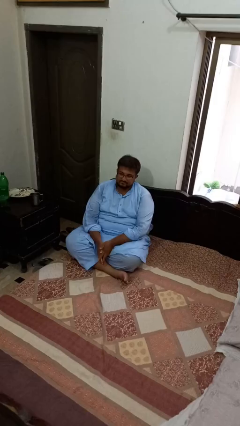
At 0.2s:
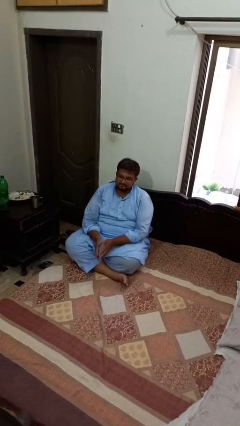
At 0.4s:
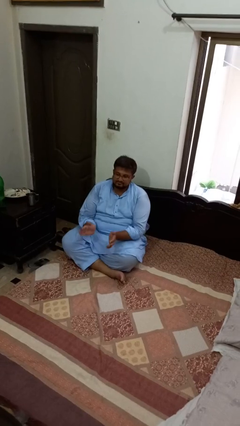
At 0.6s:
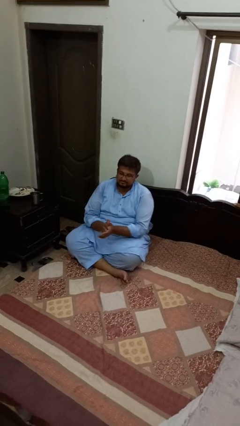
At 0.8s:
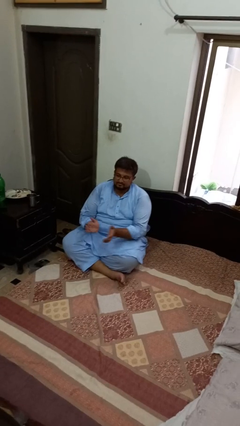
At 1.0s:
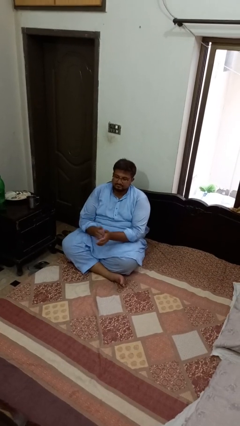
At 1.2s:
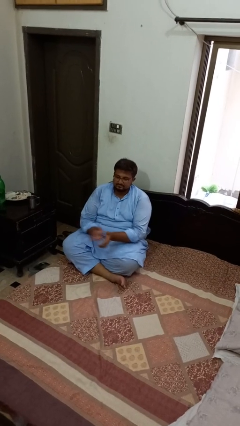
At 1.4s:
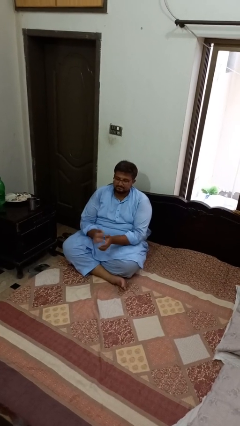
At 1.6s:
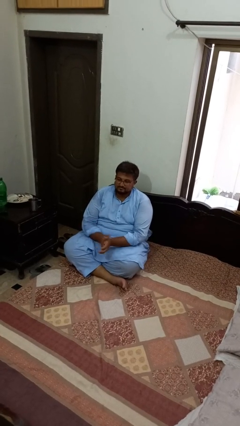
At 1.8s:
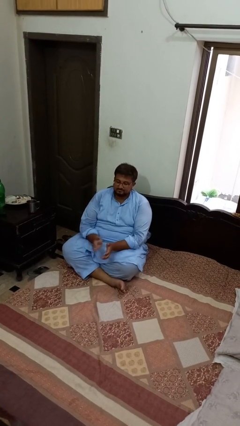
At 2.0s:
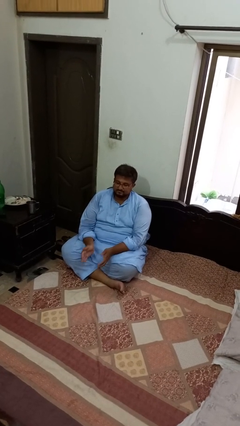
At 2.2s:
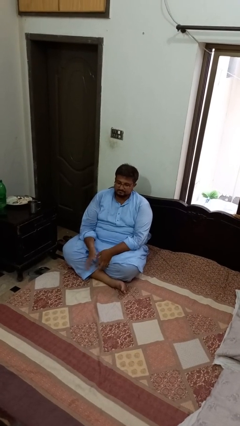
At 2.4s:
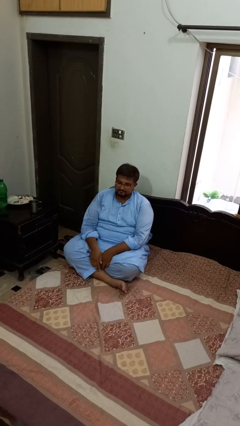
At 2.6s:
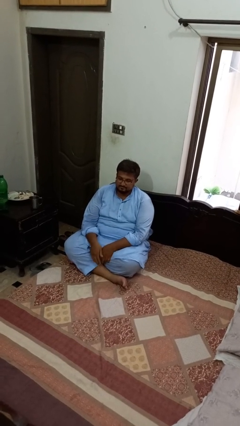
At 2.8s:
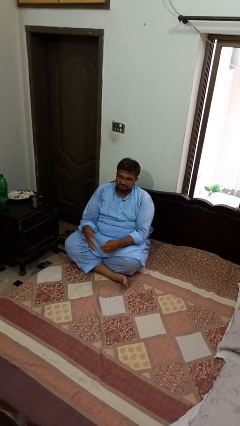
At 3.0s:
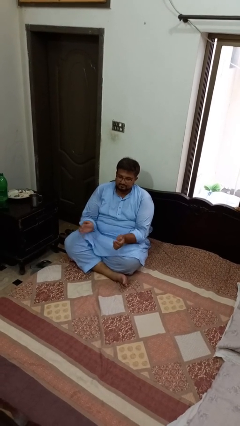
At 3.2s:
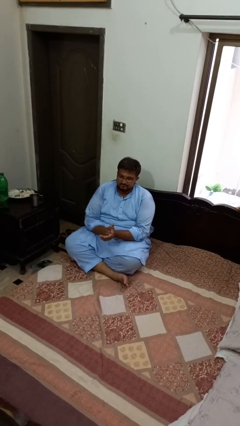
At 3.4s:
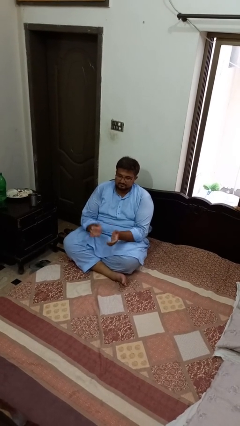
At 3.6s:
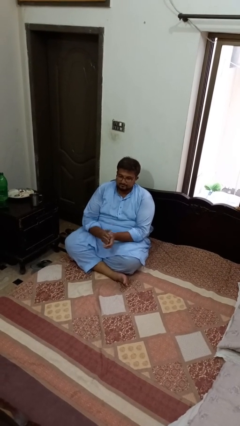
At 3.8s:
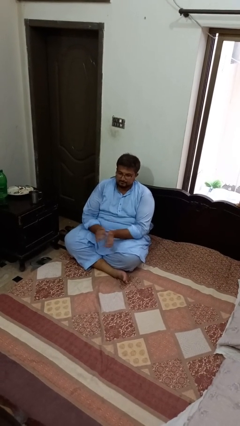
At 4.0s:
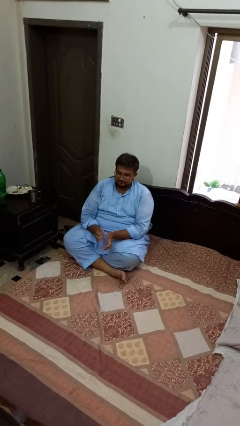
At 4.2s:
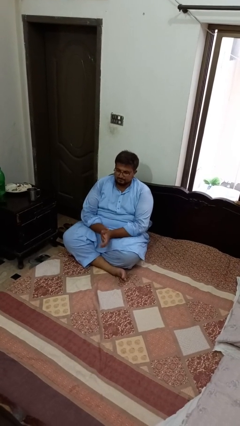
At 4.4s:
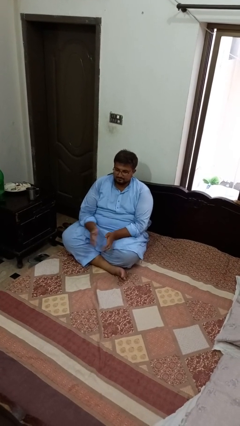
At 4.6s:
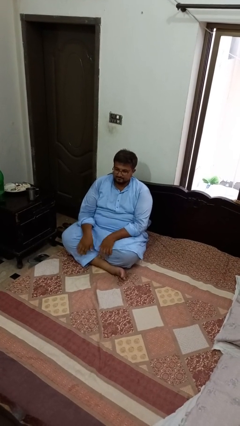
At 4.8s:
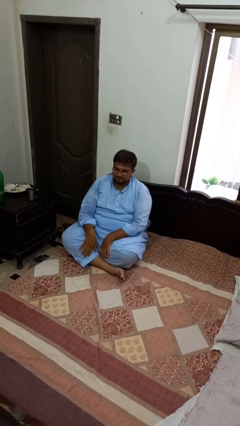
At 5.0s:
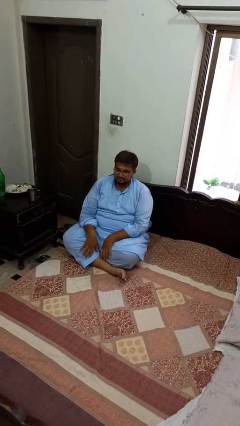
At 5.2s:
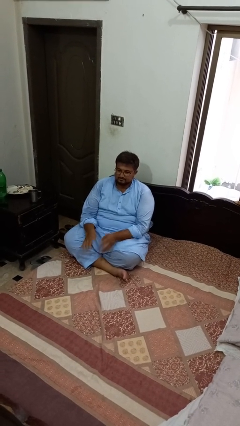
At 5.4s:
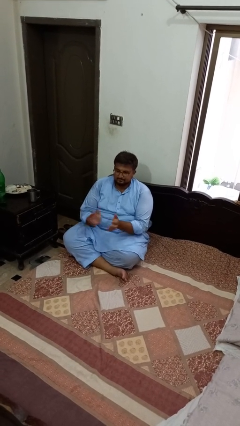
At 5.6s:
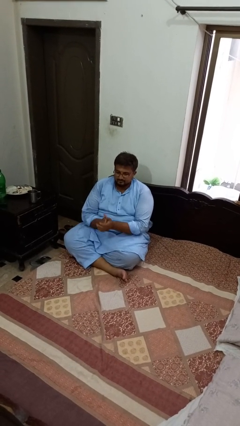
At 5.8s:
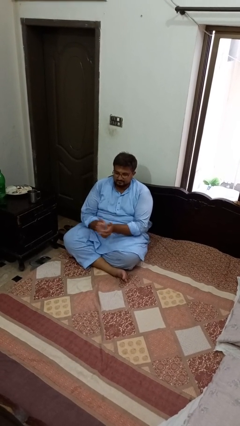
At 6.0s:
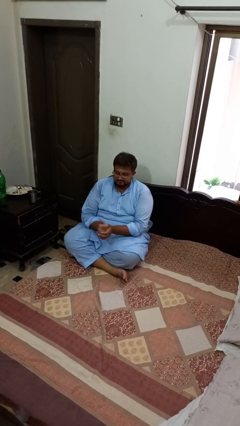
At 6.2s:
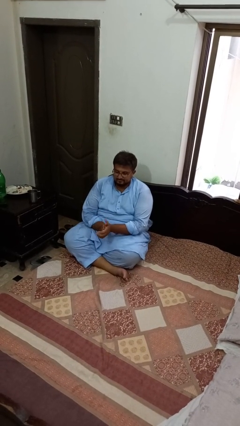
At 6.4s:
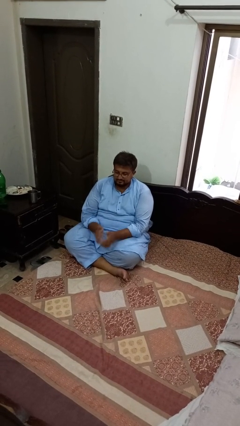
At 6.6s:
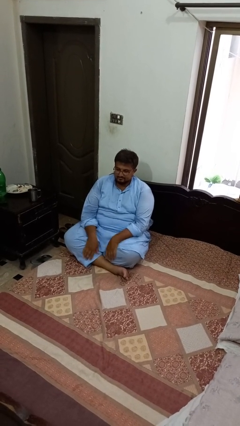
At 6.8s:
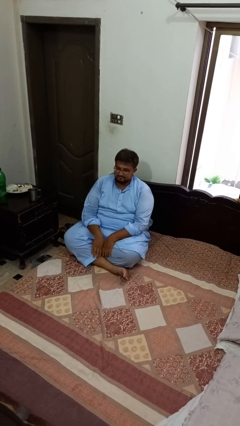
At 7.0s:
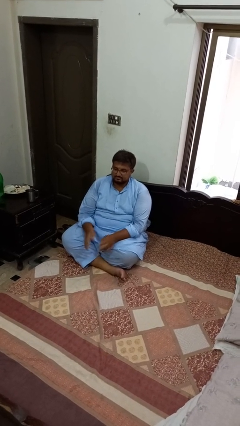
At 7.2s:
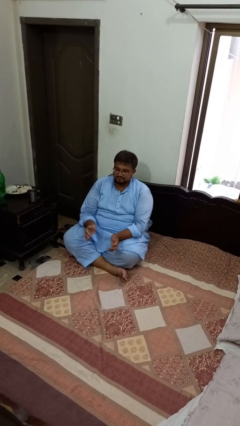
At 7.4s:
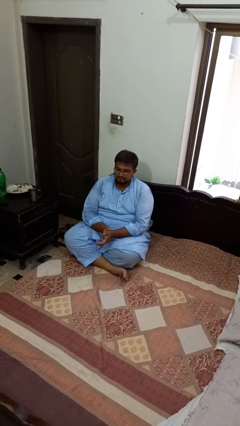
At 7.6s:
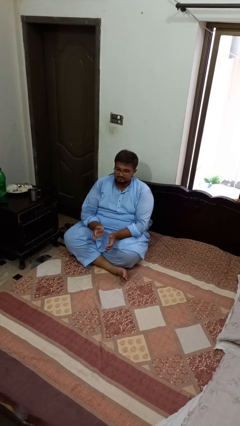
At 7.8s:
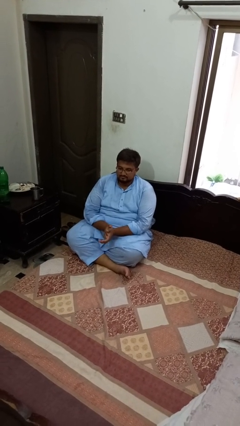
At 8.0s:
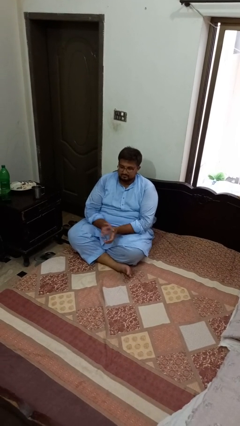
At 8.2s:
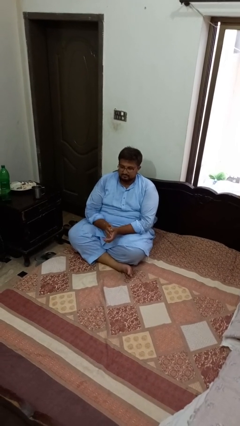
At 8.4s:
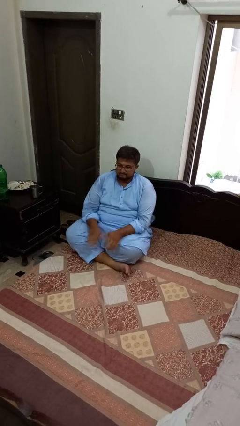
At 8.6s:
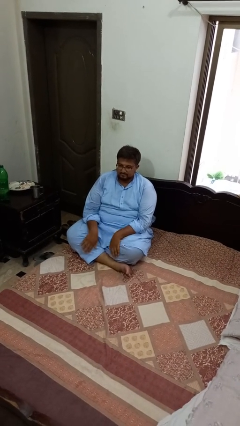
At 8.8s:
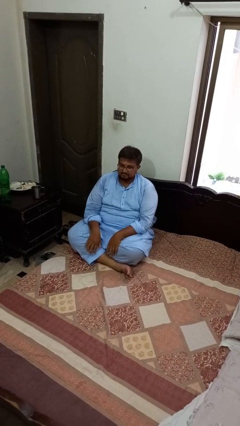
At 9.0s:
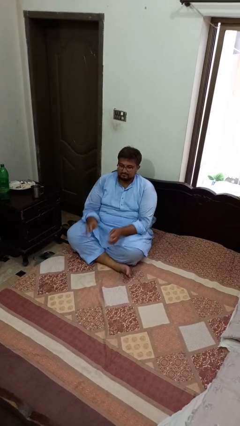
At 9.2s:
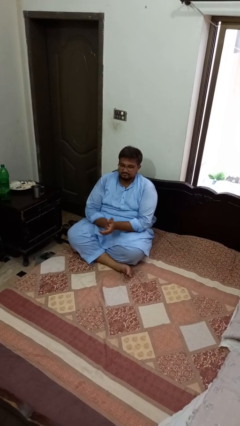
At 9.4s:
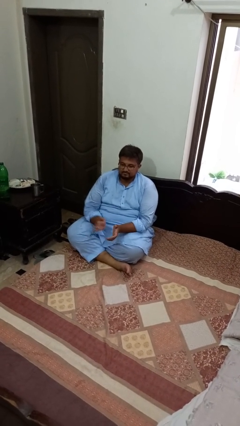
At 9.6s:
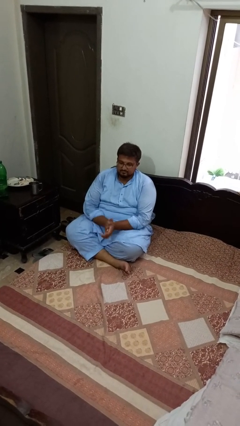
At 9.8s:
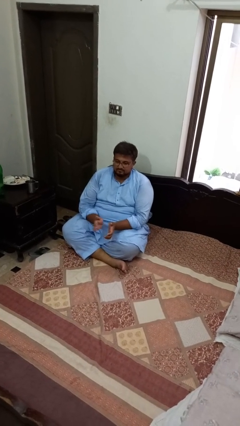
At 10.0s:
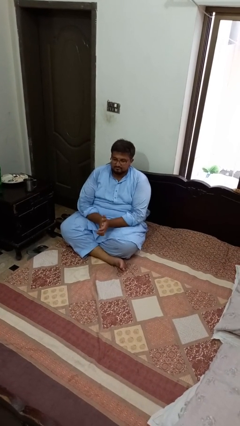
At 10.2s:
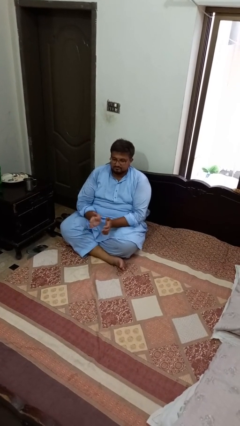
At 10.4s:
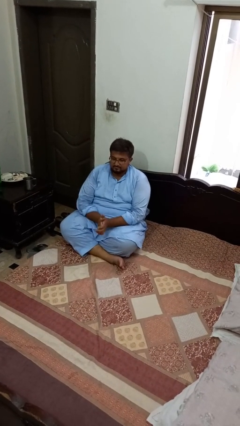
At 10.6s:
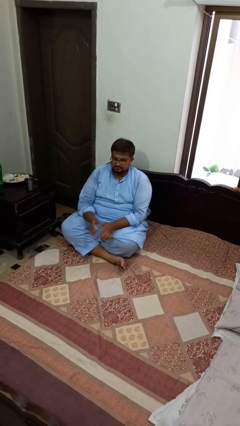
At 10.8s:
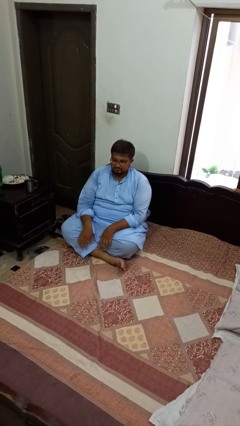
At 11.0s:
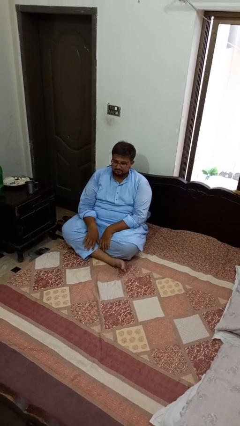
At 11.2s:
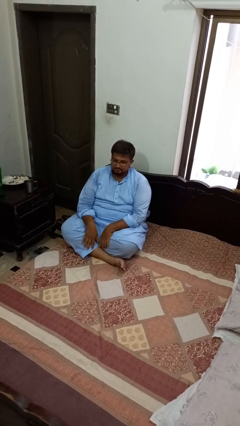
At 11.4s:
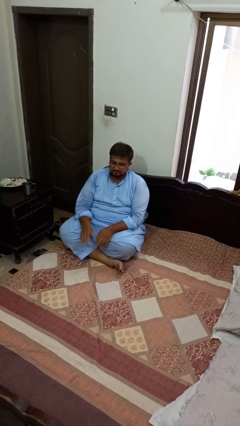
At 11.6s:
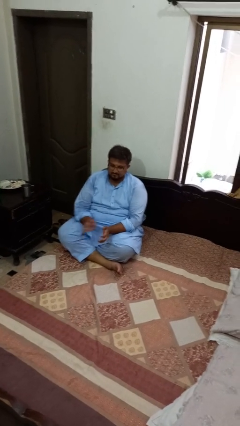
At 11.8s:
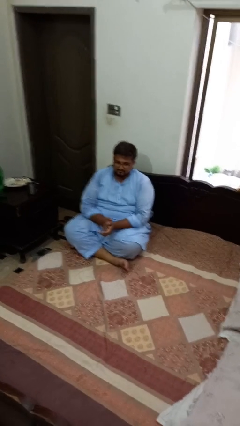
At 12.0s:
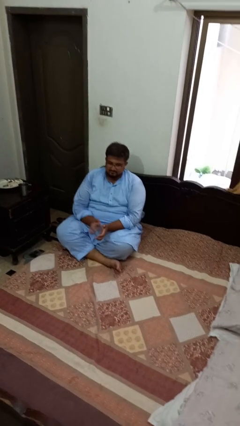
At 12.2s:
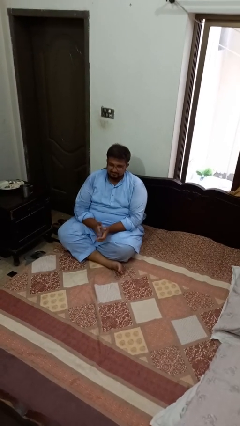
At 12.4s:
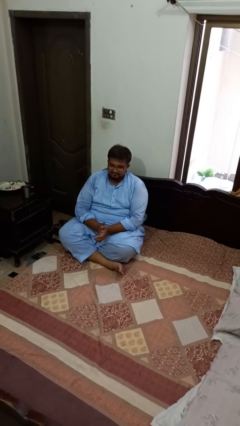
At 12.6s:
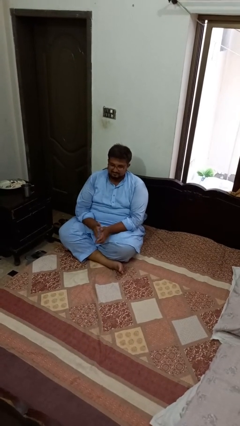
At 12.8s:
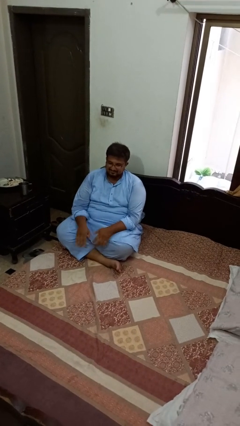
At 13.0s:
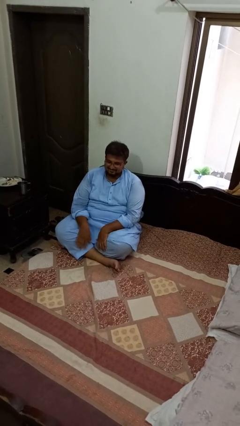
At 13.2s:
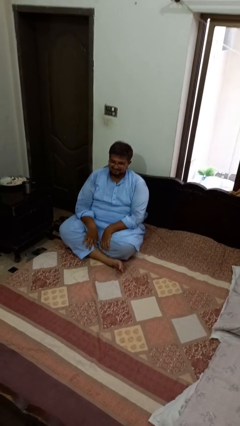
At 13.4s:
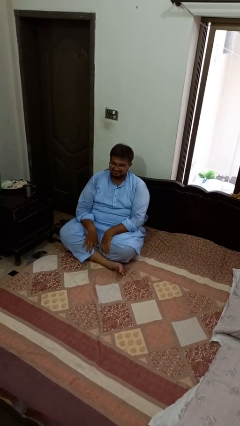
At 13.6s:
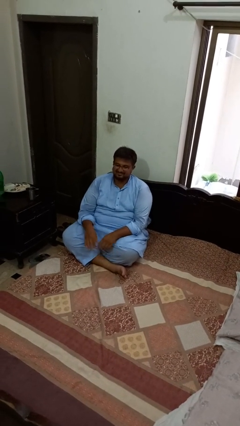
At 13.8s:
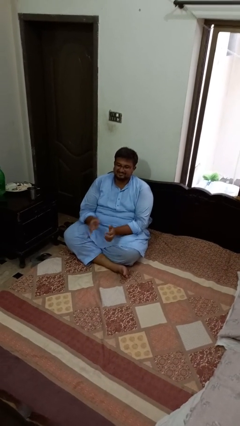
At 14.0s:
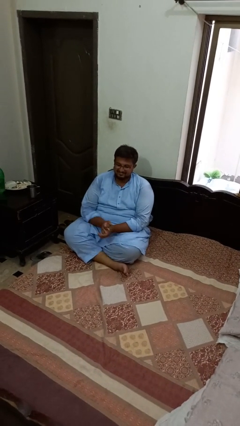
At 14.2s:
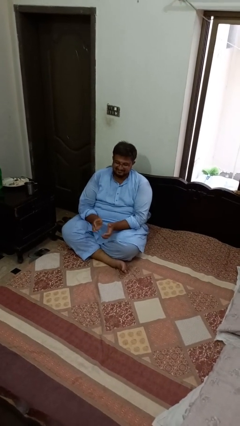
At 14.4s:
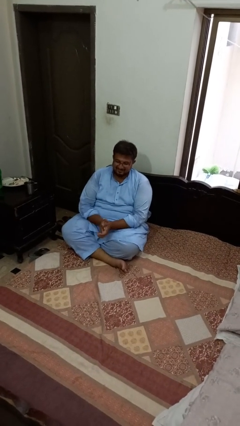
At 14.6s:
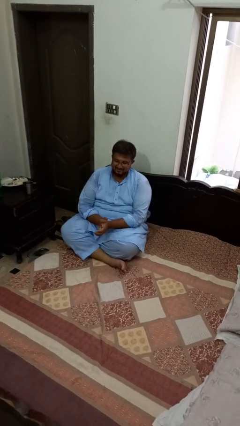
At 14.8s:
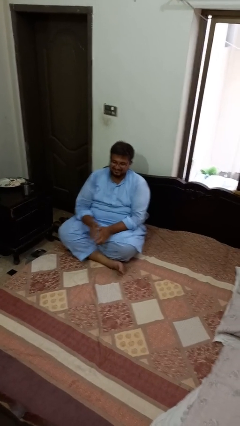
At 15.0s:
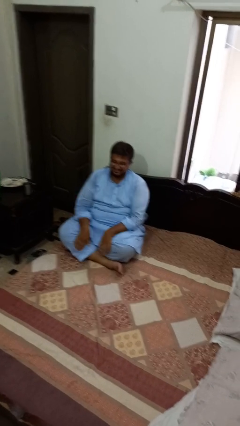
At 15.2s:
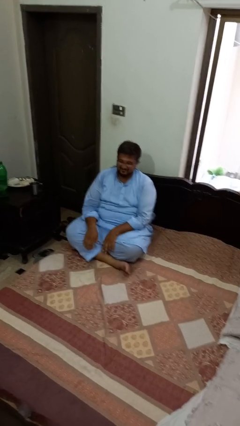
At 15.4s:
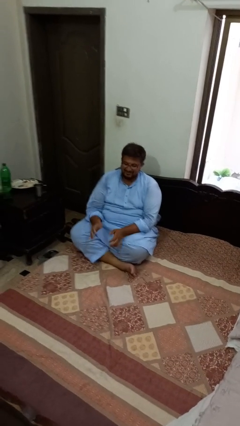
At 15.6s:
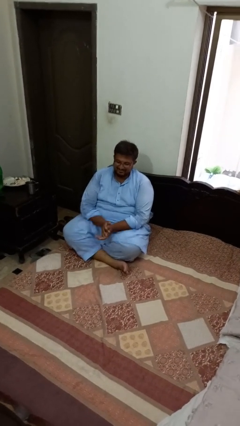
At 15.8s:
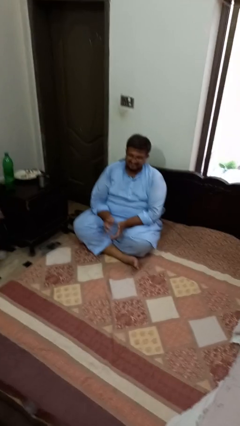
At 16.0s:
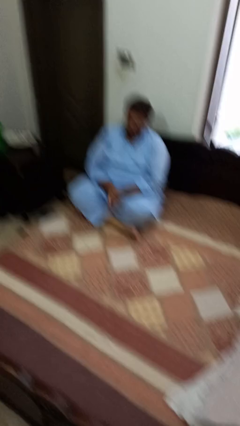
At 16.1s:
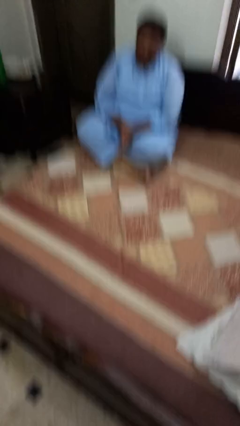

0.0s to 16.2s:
person claps hands

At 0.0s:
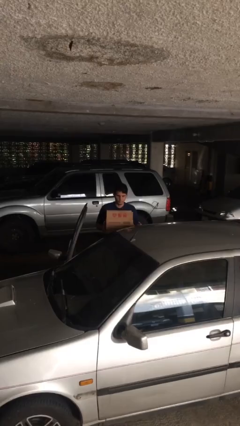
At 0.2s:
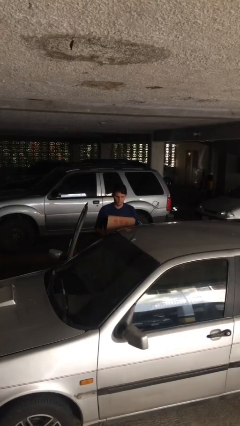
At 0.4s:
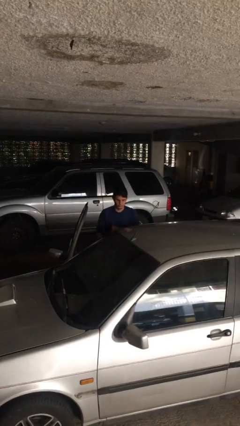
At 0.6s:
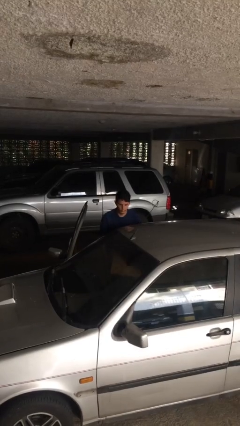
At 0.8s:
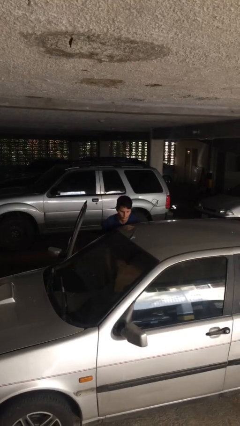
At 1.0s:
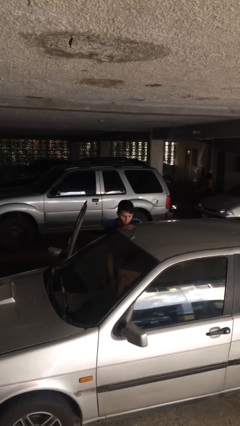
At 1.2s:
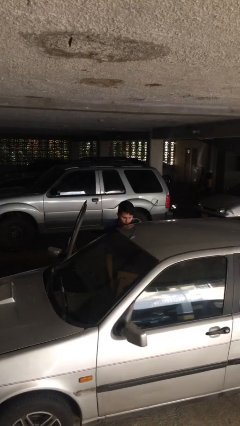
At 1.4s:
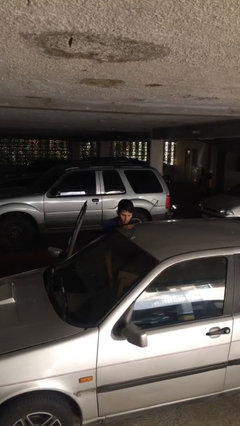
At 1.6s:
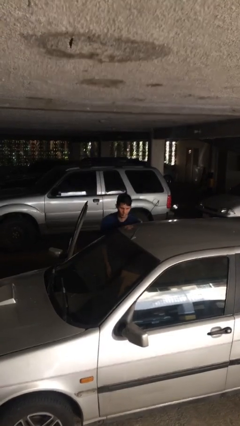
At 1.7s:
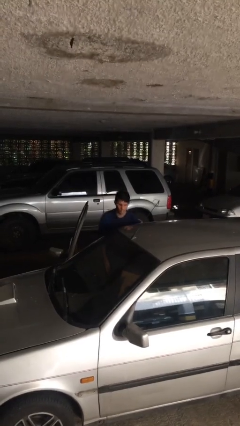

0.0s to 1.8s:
person loads car

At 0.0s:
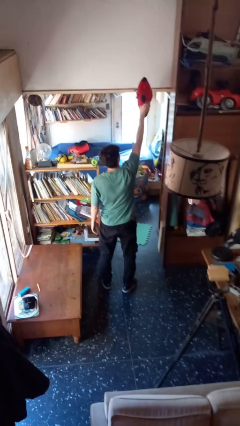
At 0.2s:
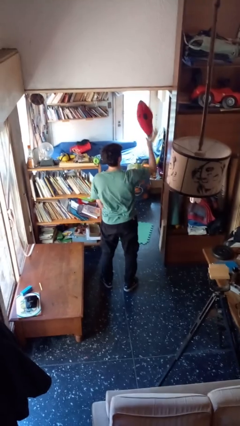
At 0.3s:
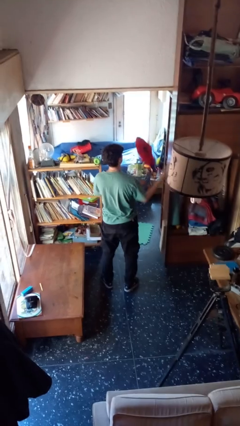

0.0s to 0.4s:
person drops object

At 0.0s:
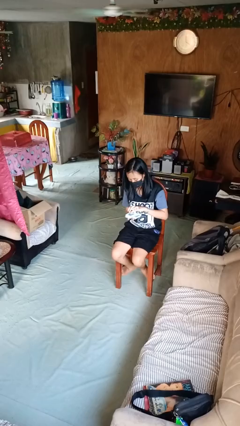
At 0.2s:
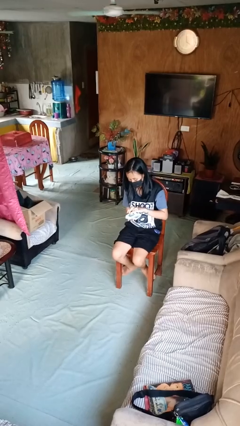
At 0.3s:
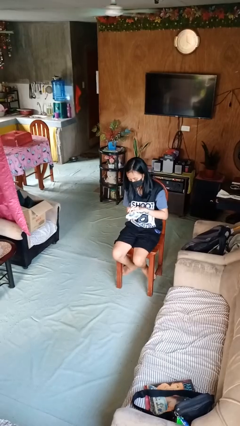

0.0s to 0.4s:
person searches jewelry box
